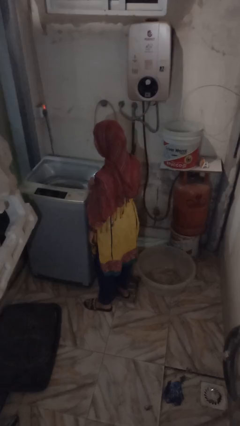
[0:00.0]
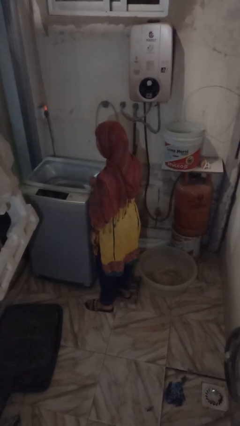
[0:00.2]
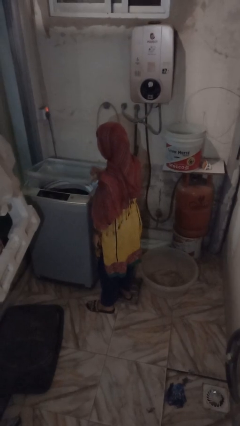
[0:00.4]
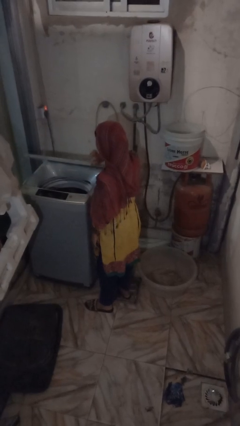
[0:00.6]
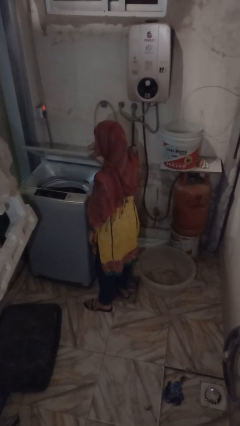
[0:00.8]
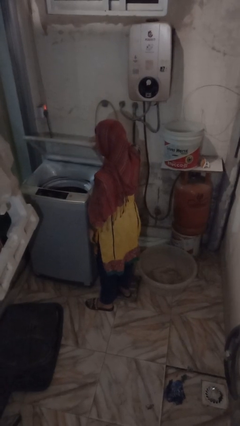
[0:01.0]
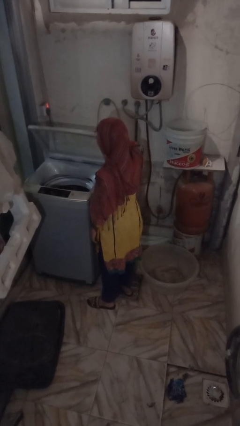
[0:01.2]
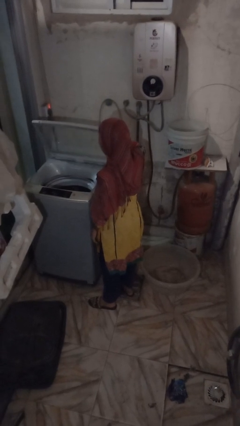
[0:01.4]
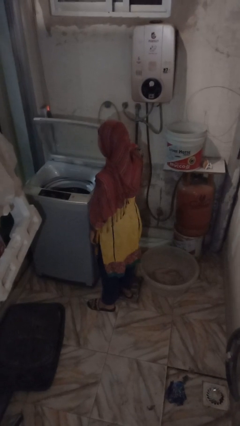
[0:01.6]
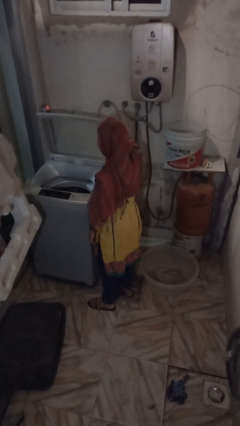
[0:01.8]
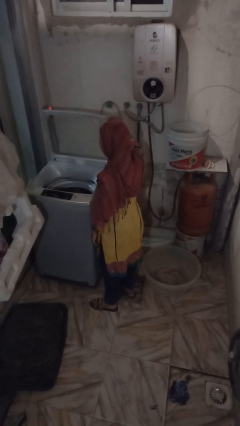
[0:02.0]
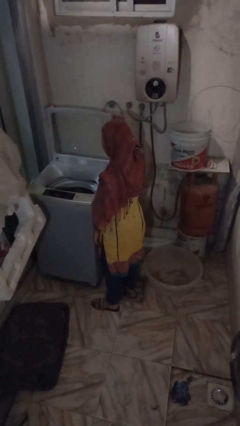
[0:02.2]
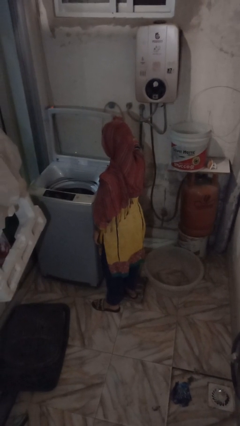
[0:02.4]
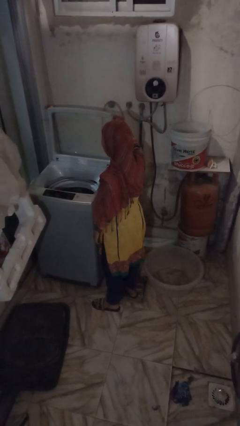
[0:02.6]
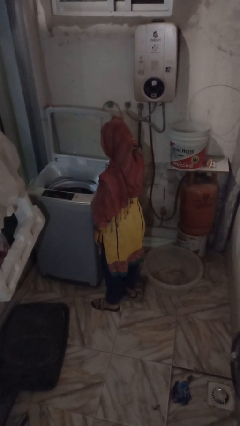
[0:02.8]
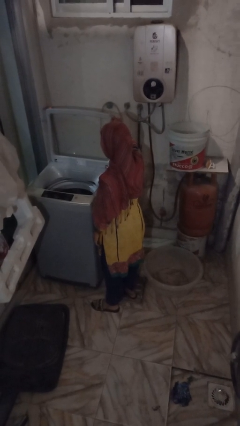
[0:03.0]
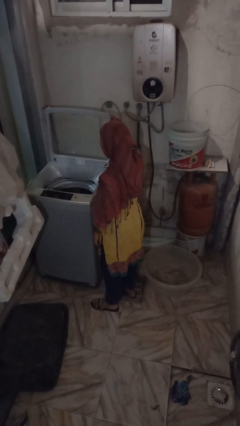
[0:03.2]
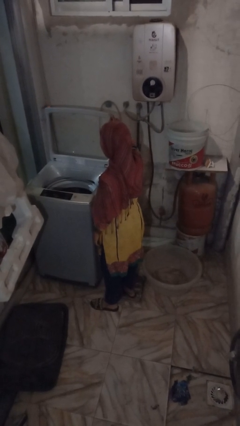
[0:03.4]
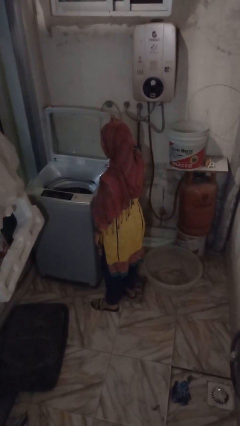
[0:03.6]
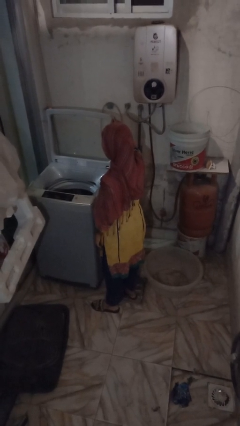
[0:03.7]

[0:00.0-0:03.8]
person opens clothes washer

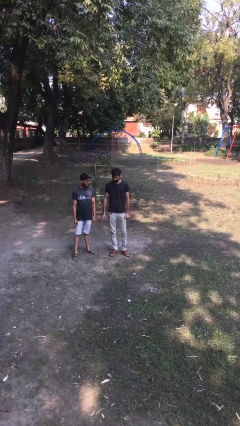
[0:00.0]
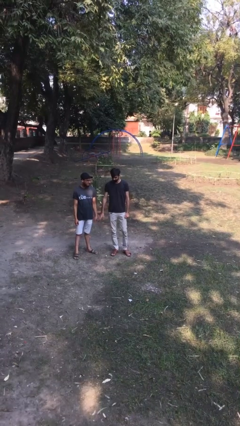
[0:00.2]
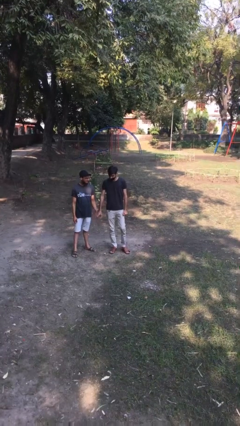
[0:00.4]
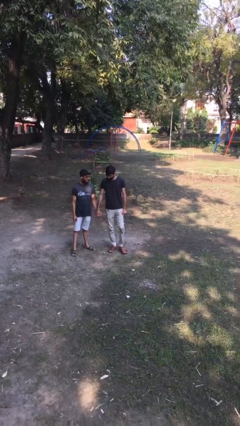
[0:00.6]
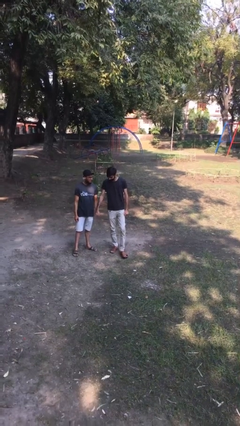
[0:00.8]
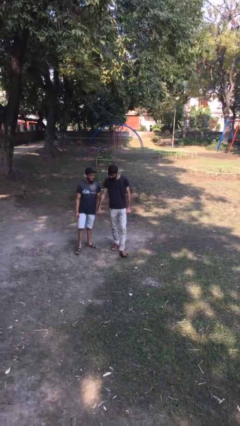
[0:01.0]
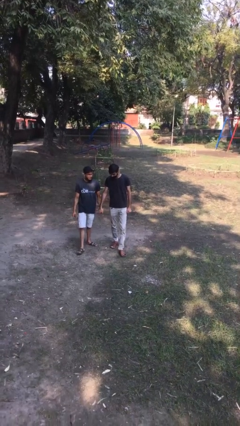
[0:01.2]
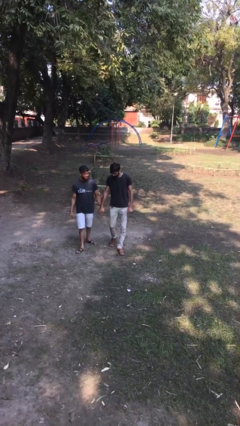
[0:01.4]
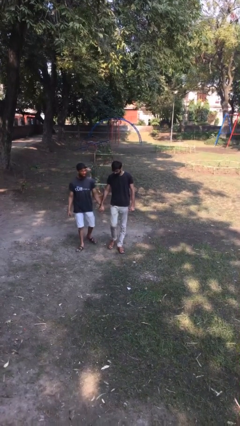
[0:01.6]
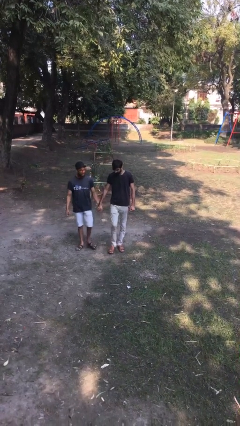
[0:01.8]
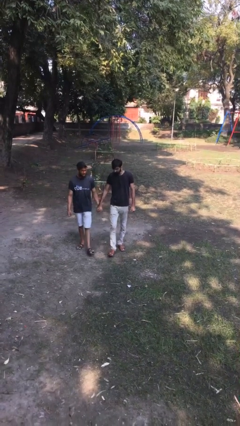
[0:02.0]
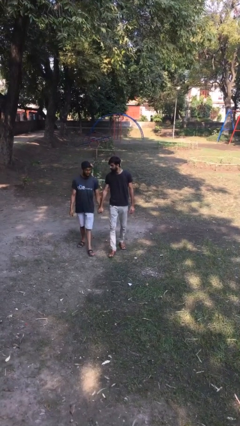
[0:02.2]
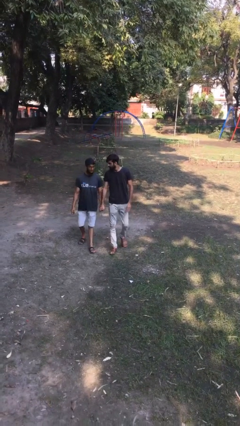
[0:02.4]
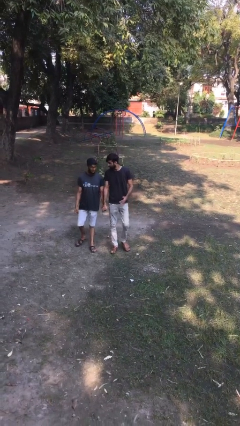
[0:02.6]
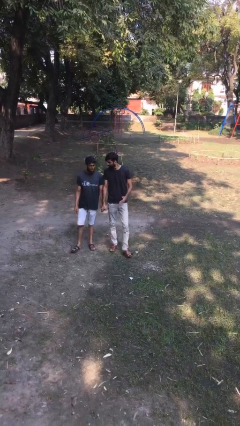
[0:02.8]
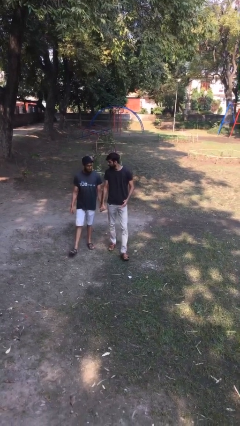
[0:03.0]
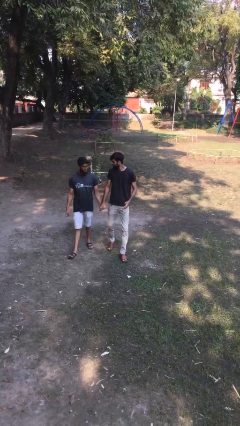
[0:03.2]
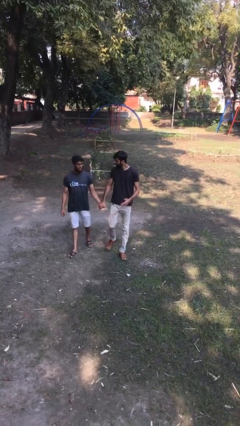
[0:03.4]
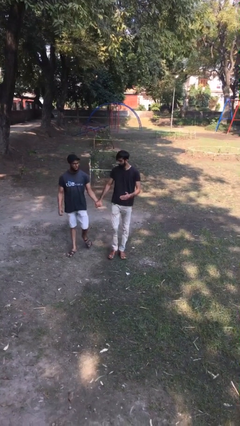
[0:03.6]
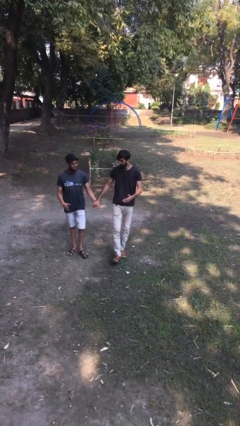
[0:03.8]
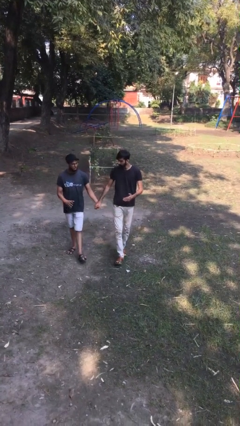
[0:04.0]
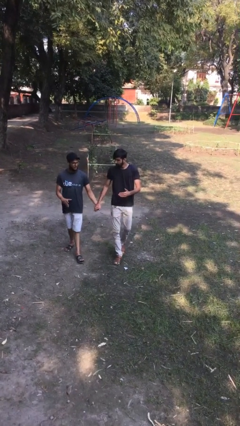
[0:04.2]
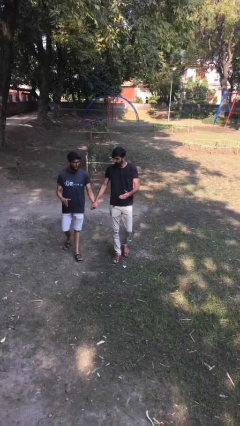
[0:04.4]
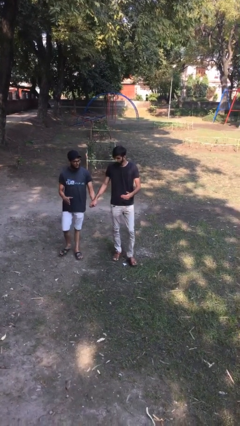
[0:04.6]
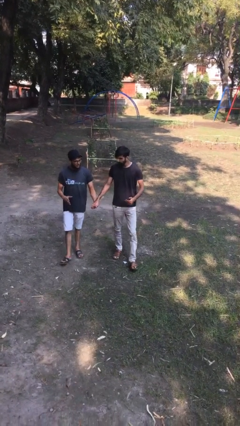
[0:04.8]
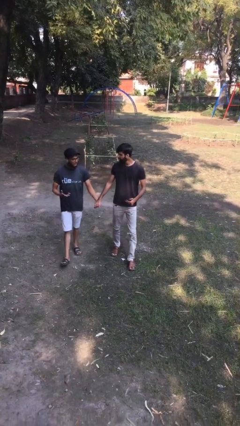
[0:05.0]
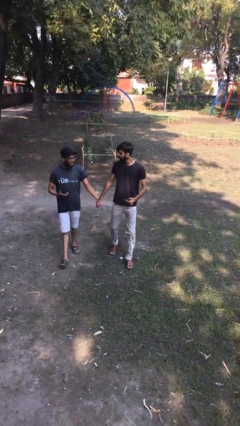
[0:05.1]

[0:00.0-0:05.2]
person holds hand

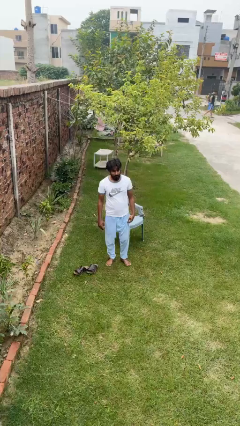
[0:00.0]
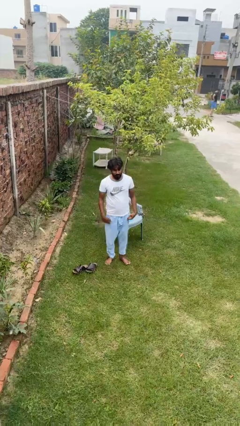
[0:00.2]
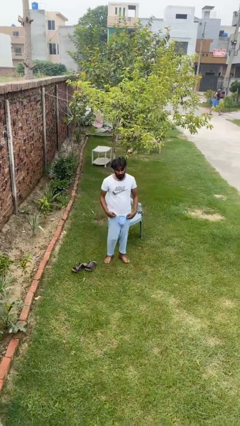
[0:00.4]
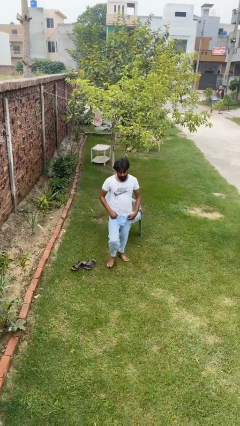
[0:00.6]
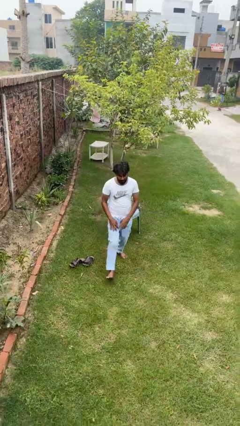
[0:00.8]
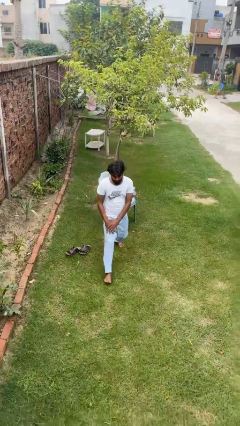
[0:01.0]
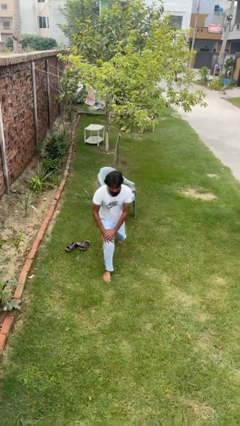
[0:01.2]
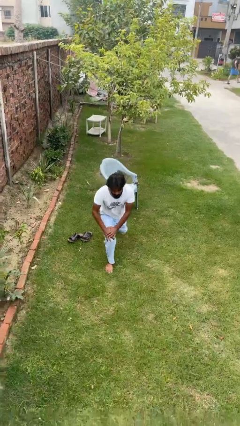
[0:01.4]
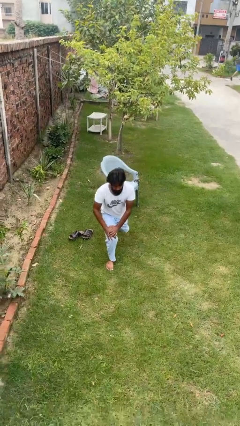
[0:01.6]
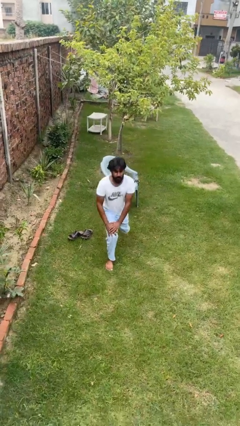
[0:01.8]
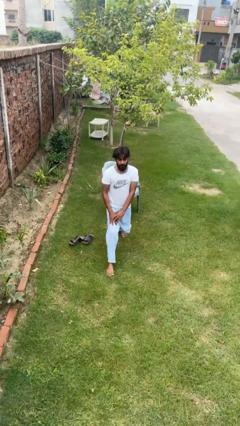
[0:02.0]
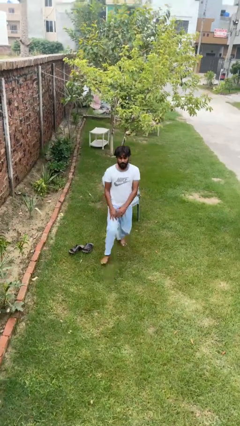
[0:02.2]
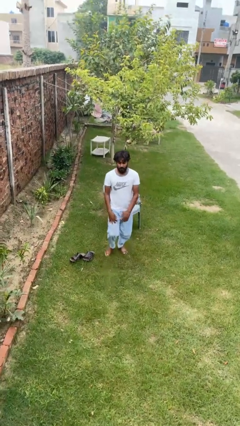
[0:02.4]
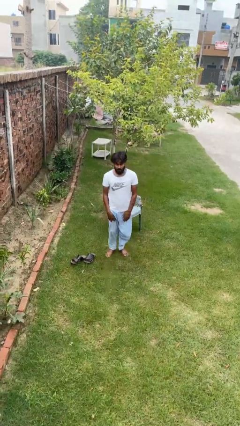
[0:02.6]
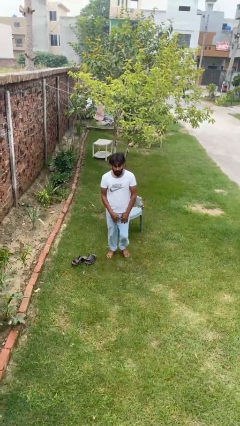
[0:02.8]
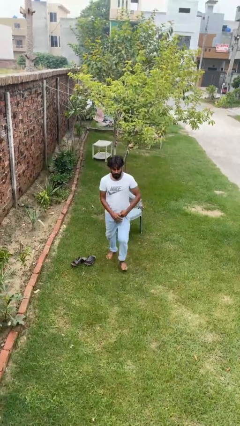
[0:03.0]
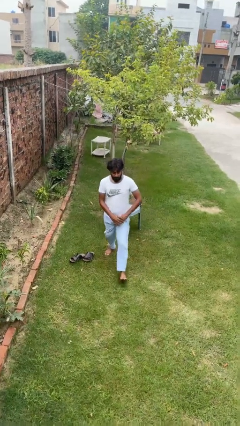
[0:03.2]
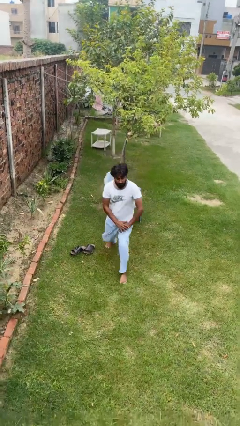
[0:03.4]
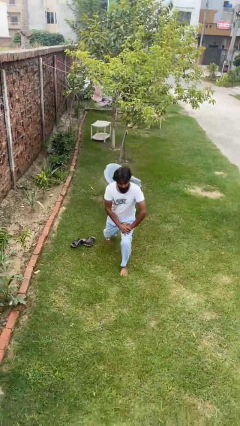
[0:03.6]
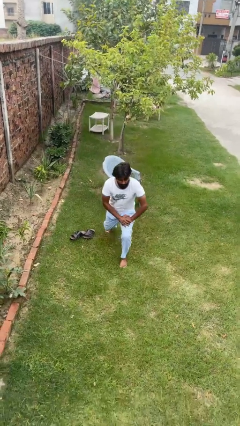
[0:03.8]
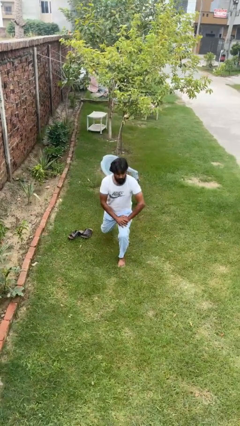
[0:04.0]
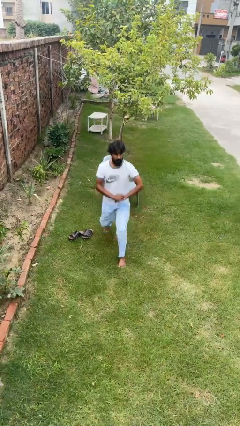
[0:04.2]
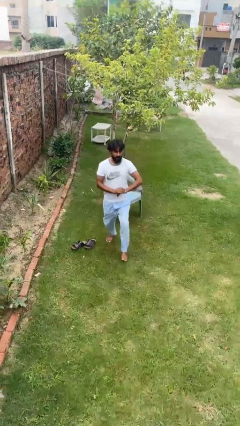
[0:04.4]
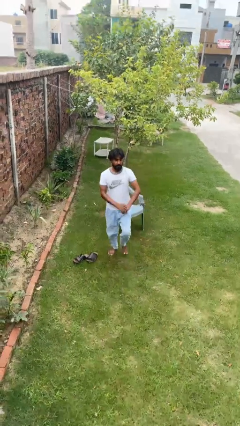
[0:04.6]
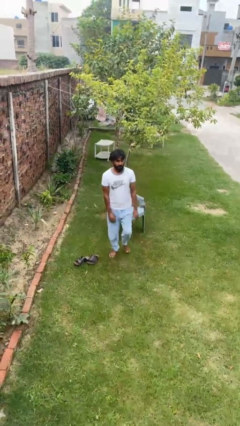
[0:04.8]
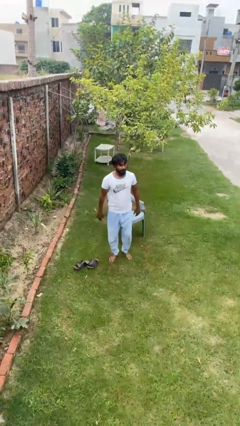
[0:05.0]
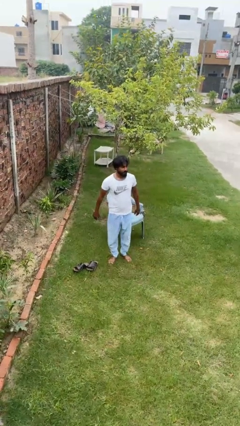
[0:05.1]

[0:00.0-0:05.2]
person exercises with lunges

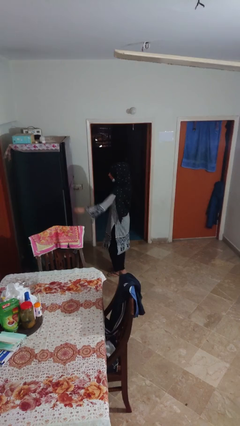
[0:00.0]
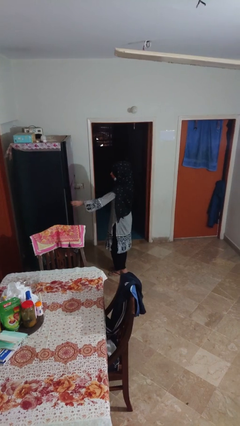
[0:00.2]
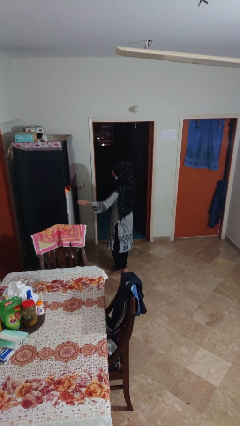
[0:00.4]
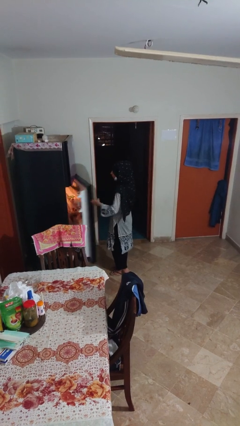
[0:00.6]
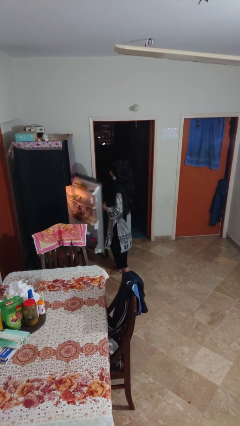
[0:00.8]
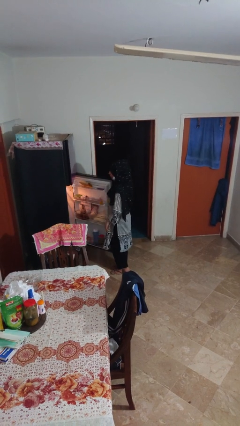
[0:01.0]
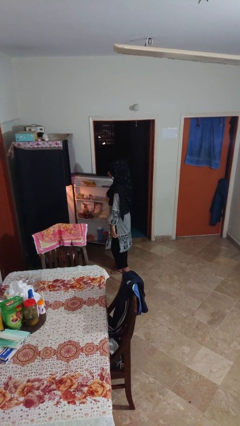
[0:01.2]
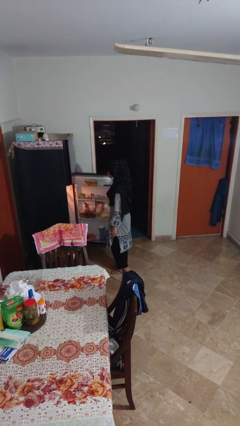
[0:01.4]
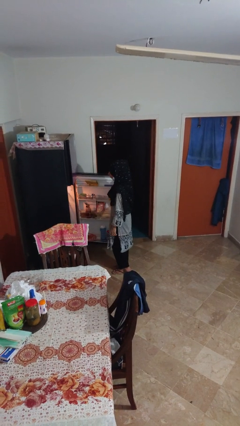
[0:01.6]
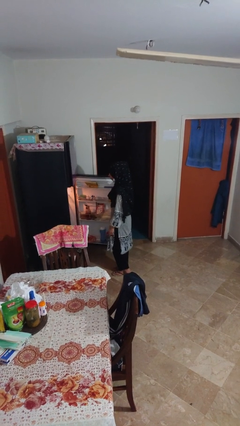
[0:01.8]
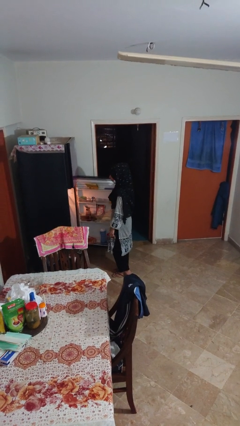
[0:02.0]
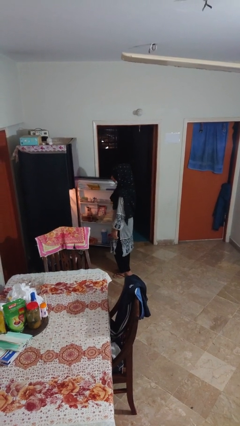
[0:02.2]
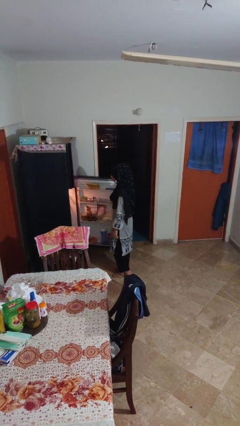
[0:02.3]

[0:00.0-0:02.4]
person opens refrigerator

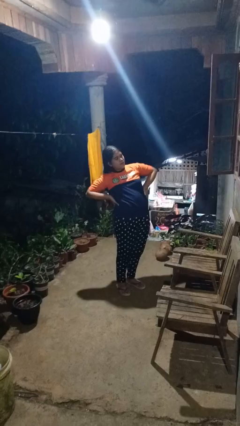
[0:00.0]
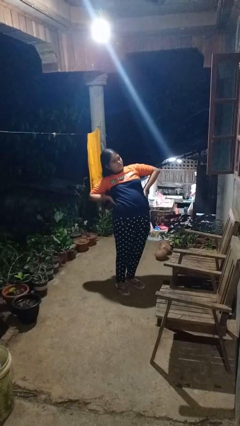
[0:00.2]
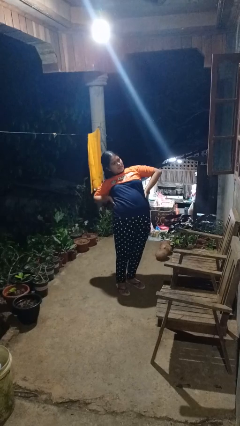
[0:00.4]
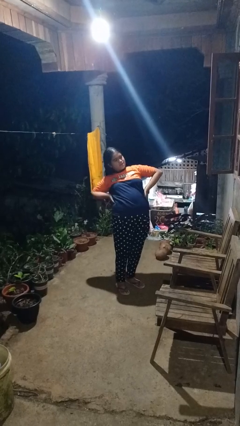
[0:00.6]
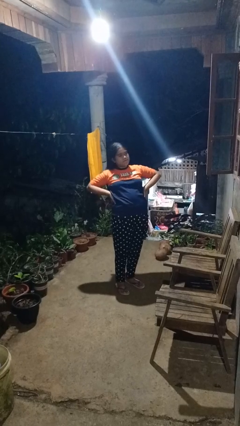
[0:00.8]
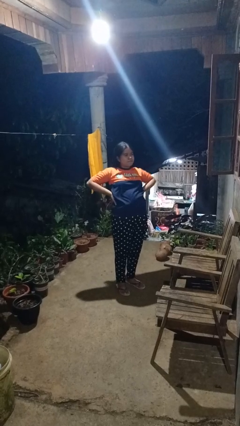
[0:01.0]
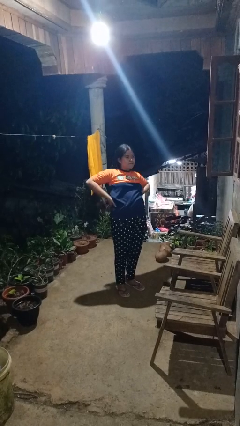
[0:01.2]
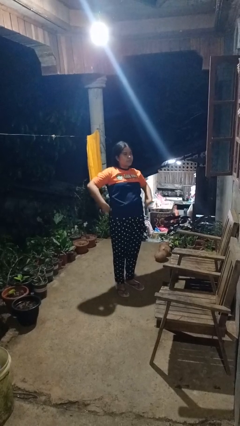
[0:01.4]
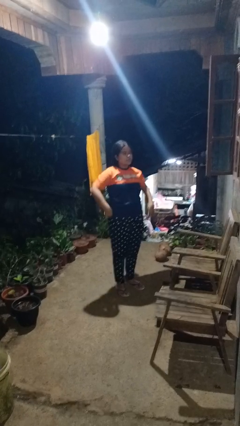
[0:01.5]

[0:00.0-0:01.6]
person stretches back
